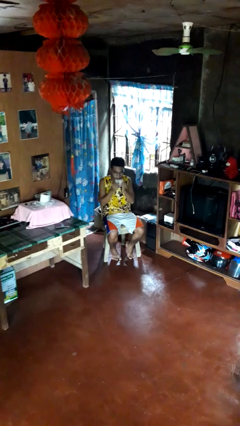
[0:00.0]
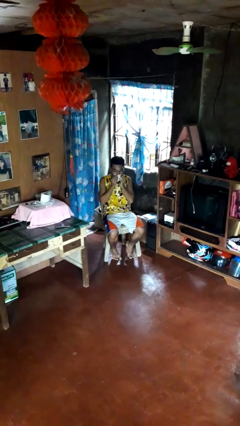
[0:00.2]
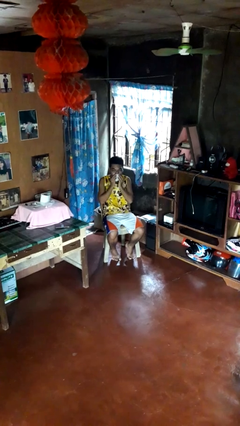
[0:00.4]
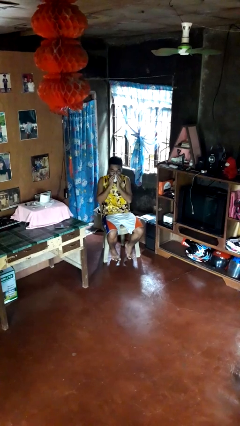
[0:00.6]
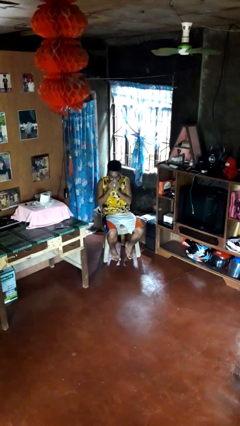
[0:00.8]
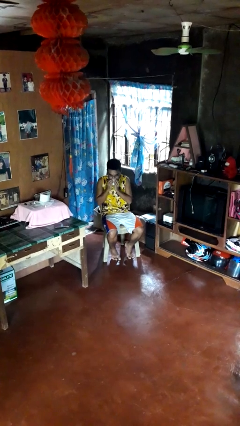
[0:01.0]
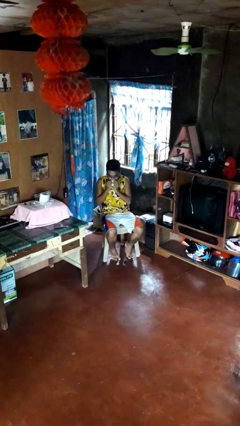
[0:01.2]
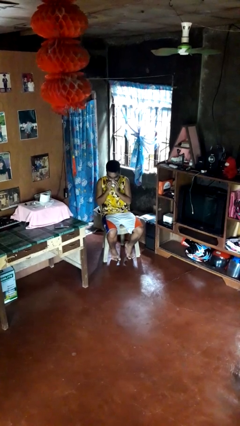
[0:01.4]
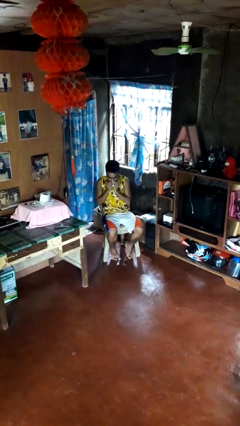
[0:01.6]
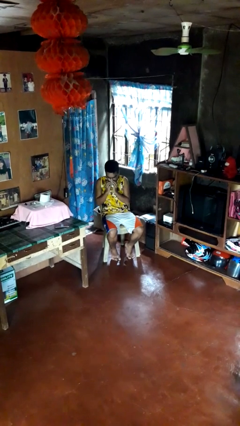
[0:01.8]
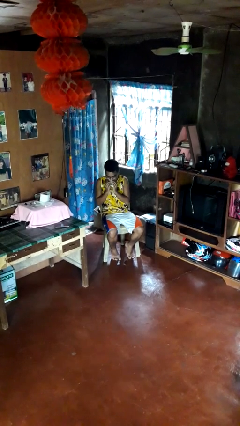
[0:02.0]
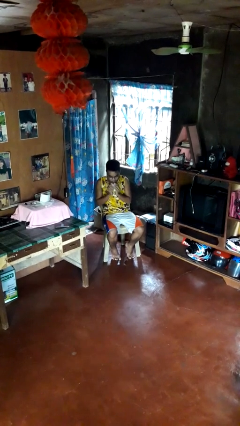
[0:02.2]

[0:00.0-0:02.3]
person blows nose

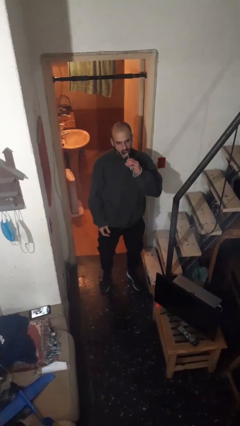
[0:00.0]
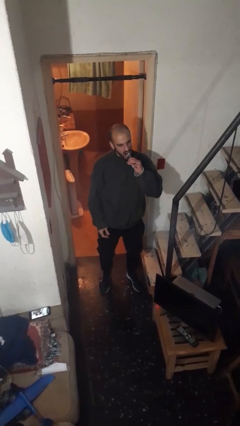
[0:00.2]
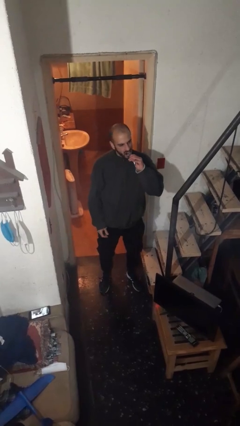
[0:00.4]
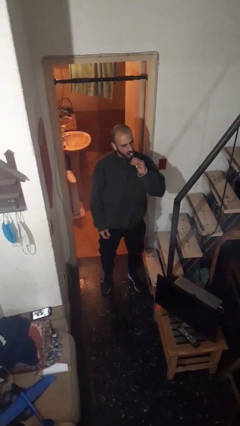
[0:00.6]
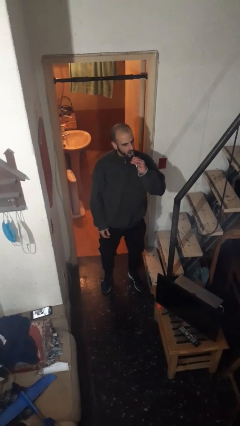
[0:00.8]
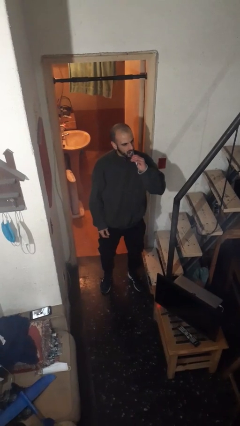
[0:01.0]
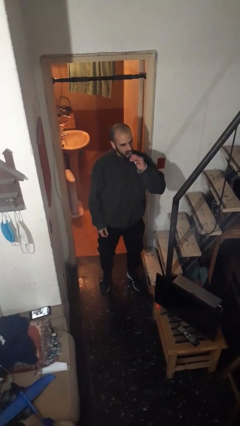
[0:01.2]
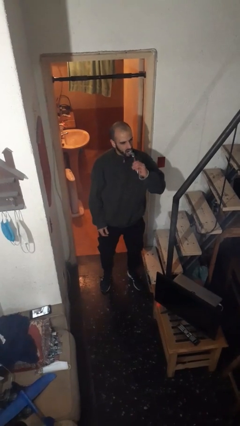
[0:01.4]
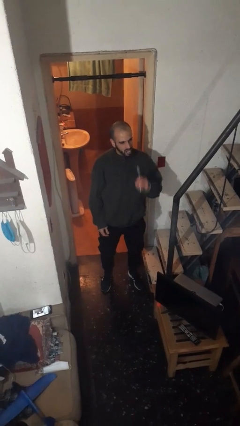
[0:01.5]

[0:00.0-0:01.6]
person brushes teeth

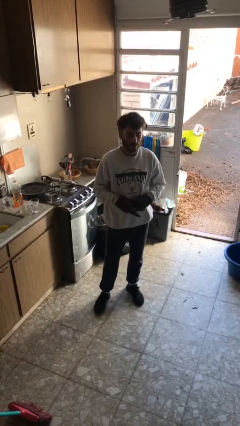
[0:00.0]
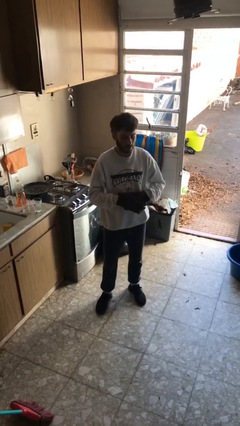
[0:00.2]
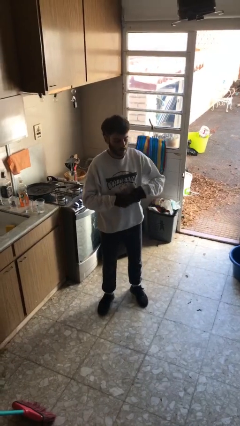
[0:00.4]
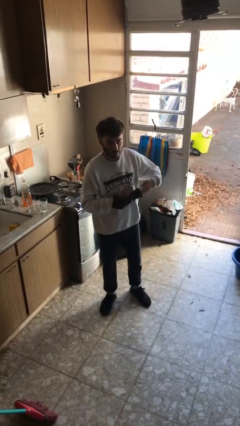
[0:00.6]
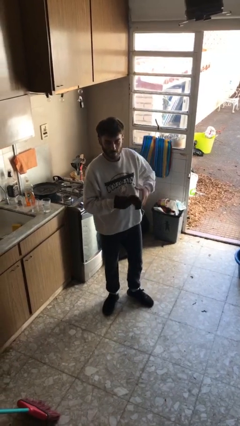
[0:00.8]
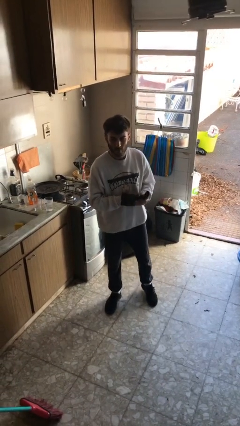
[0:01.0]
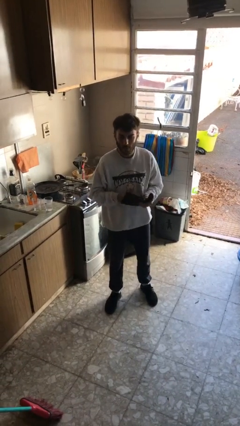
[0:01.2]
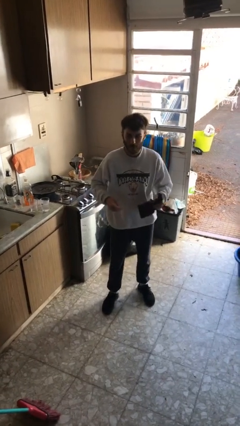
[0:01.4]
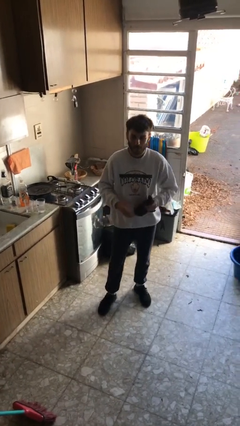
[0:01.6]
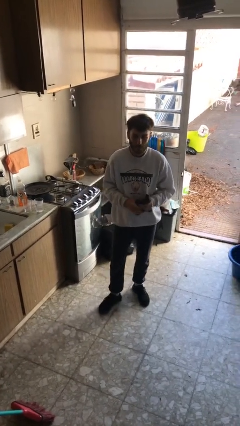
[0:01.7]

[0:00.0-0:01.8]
person takes off gloves

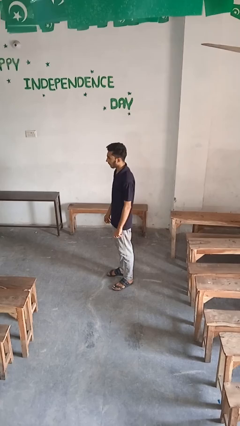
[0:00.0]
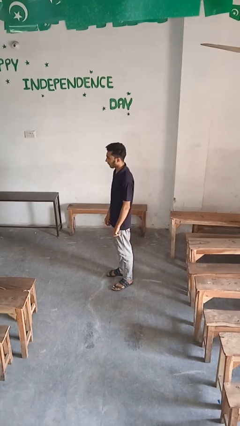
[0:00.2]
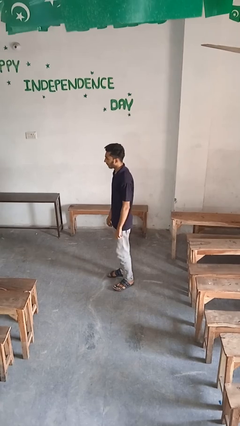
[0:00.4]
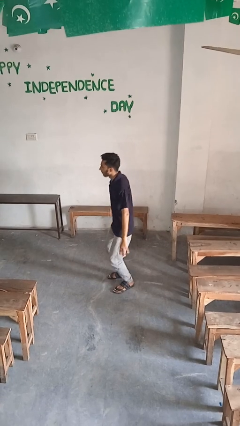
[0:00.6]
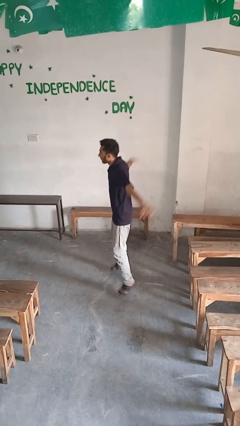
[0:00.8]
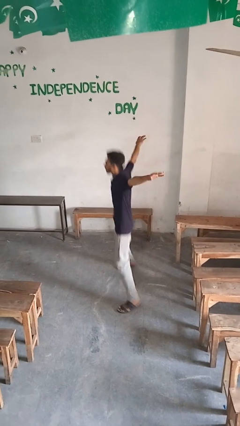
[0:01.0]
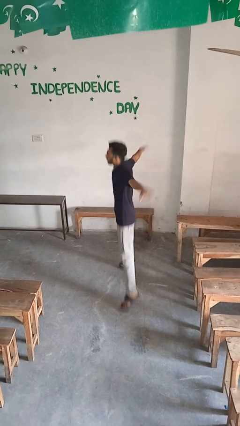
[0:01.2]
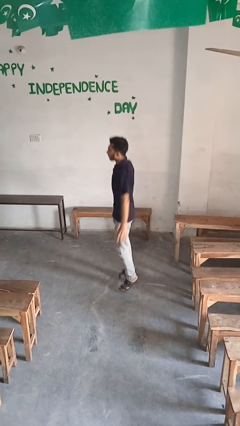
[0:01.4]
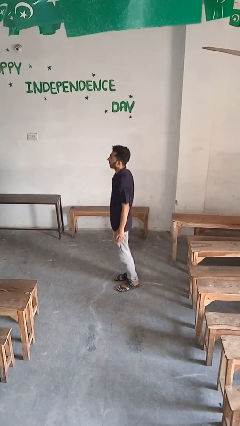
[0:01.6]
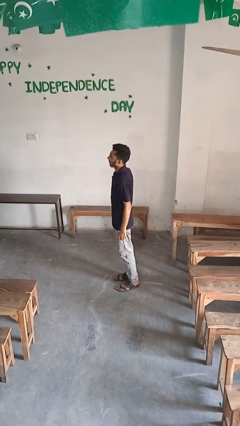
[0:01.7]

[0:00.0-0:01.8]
person exercises with jumping jacks

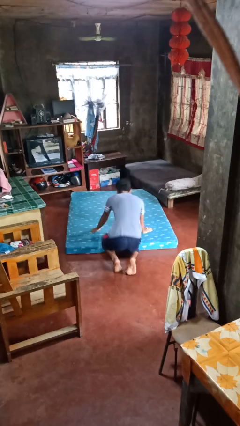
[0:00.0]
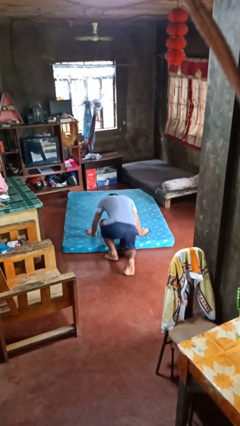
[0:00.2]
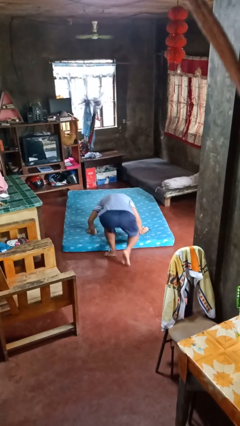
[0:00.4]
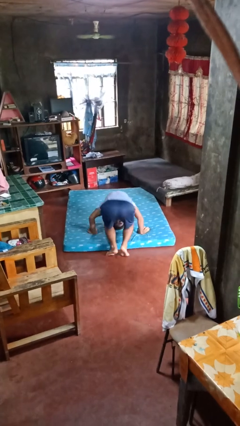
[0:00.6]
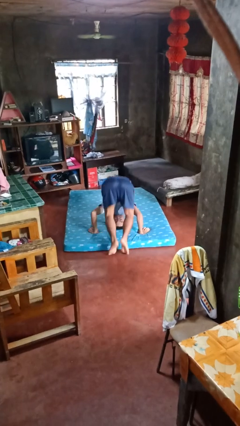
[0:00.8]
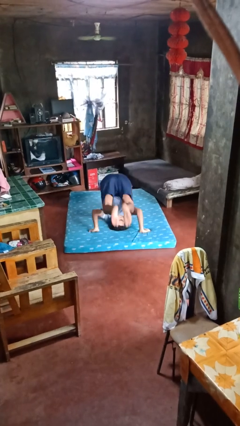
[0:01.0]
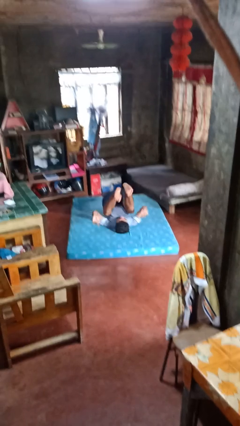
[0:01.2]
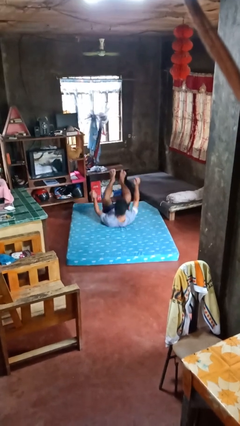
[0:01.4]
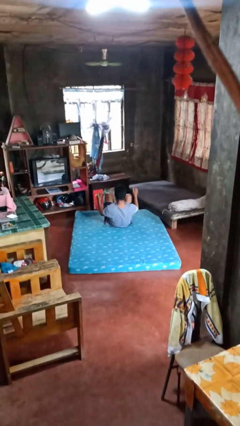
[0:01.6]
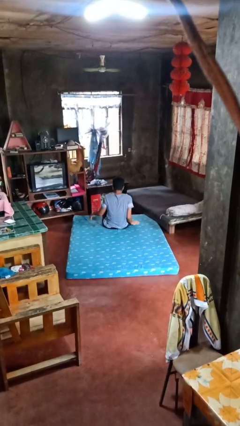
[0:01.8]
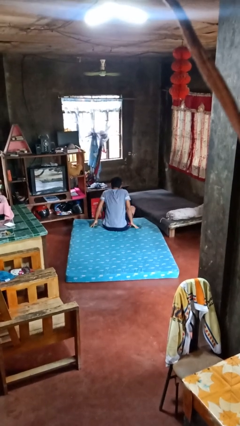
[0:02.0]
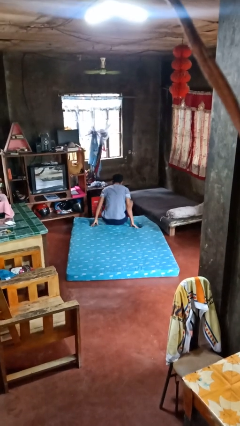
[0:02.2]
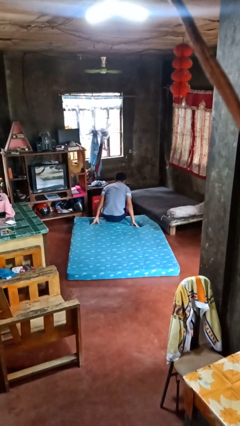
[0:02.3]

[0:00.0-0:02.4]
person somersaults

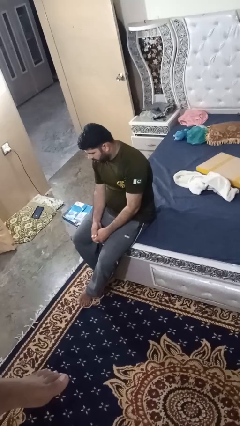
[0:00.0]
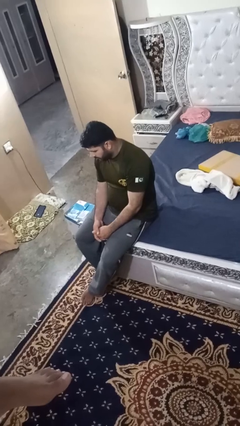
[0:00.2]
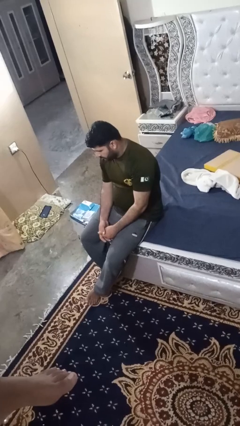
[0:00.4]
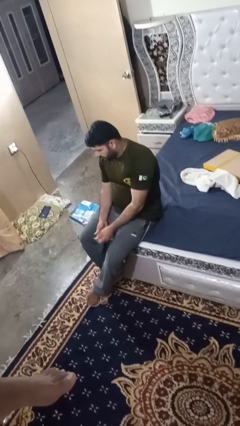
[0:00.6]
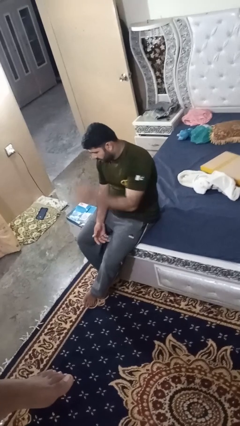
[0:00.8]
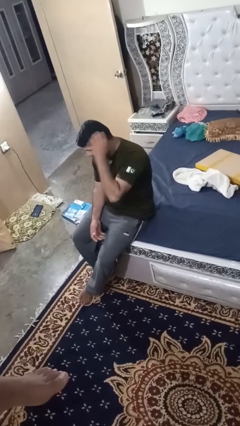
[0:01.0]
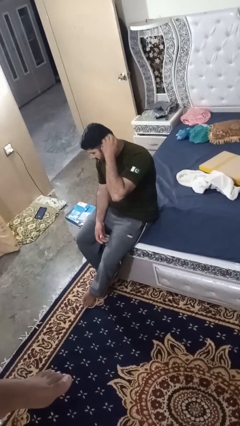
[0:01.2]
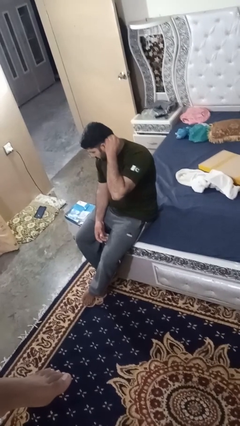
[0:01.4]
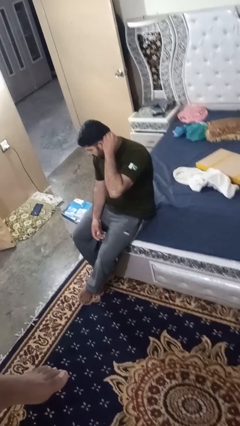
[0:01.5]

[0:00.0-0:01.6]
person strokes hair

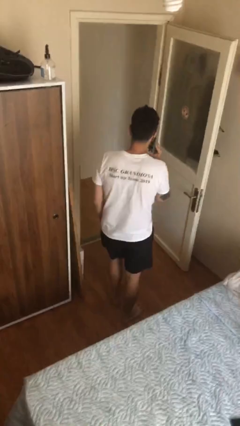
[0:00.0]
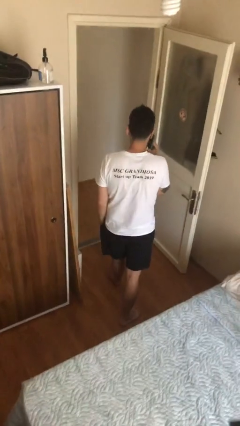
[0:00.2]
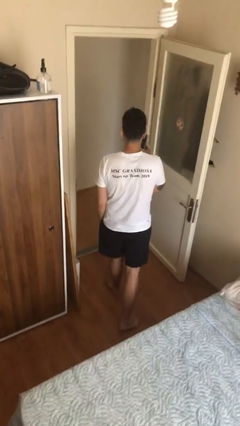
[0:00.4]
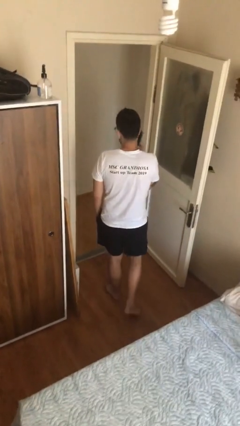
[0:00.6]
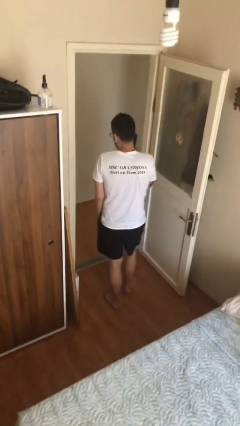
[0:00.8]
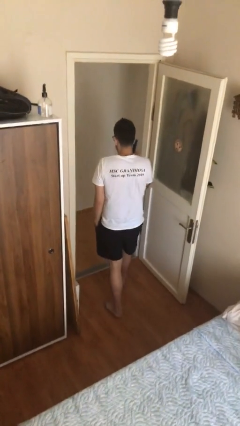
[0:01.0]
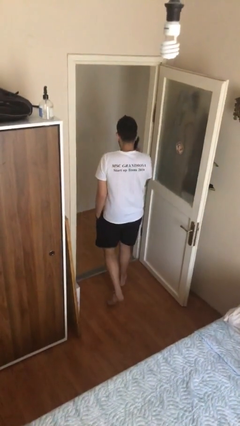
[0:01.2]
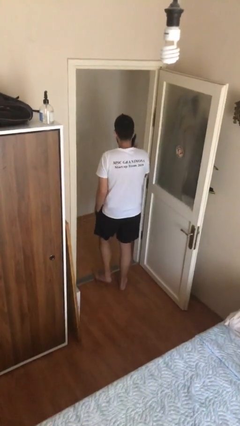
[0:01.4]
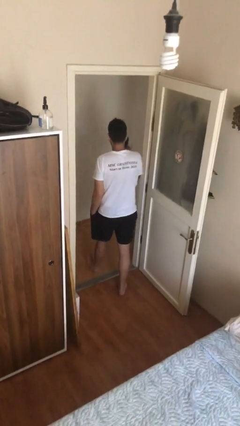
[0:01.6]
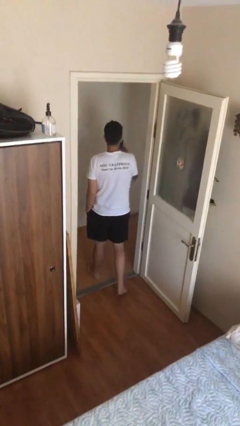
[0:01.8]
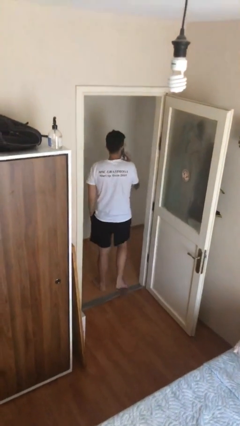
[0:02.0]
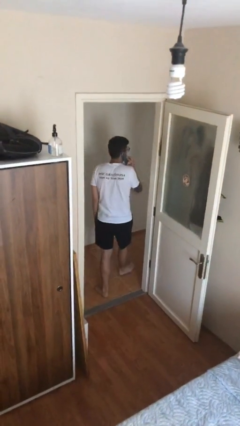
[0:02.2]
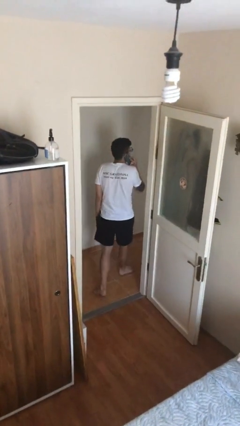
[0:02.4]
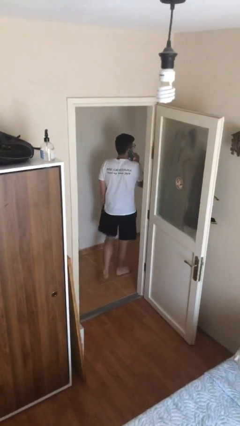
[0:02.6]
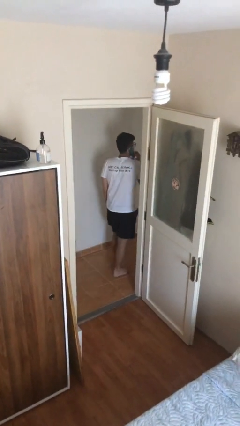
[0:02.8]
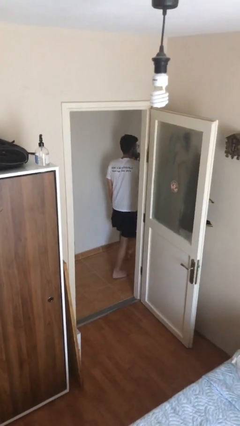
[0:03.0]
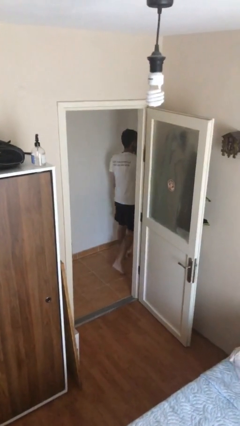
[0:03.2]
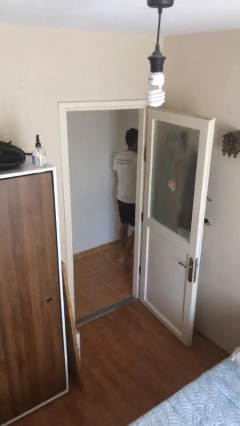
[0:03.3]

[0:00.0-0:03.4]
person exits scene through structure

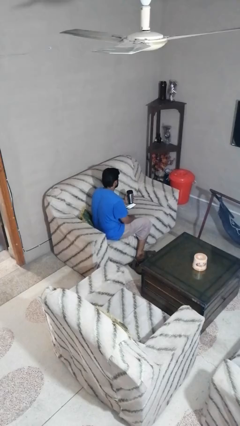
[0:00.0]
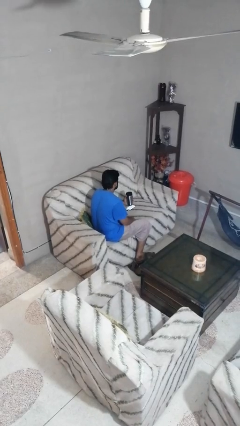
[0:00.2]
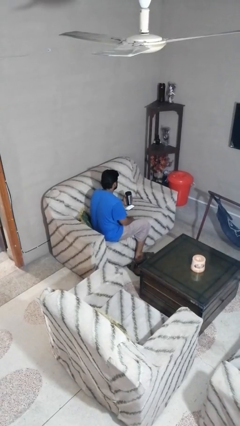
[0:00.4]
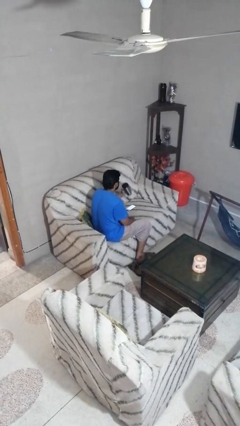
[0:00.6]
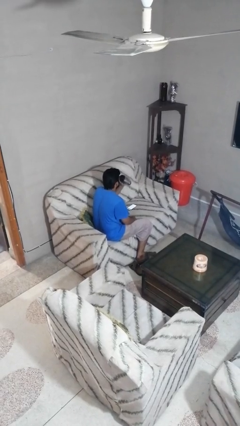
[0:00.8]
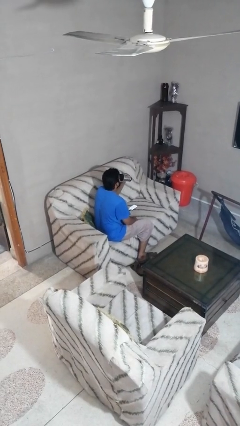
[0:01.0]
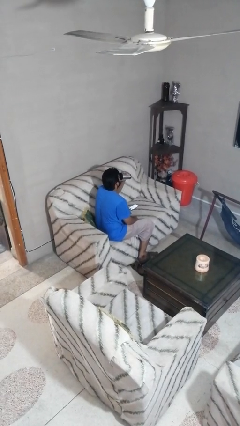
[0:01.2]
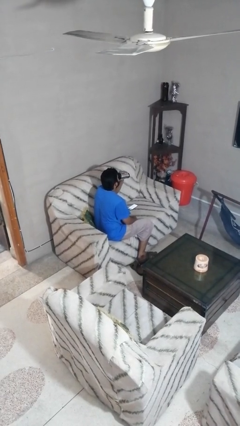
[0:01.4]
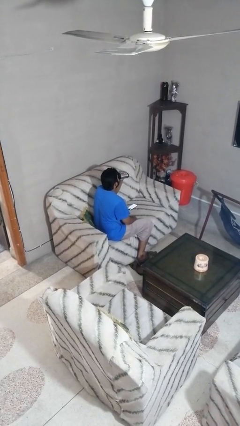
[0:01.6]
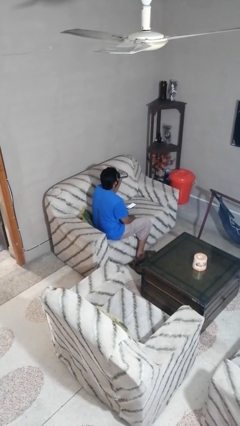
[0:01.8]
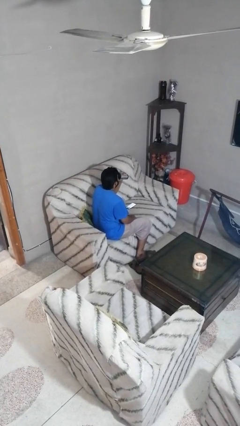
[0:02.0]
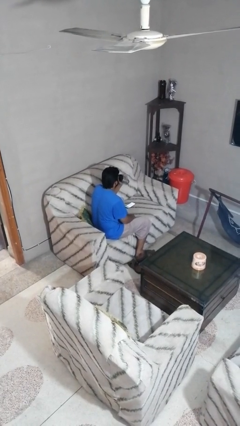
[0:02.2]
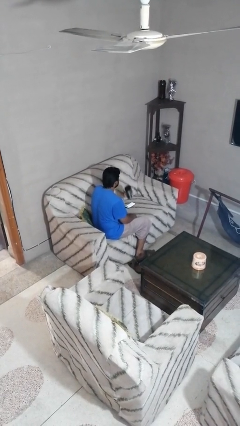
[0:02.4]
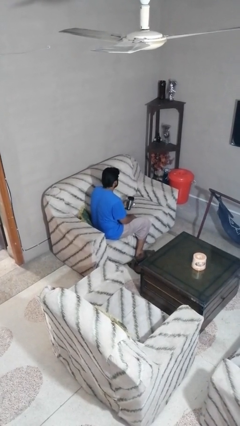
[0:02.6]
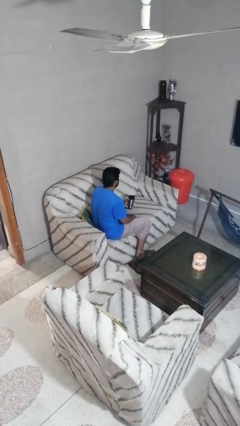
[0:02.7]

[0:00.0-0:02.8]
person drinks from beverage can
